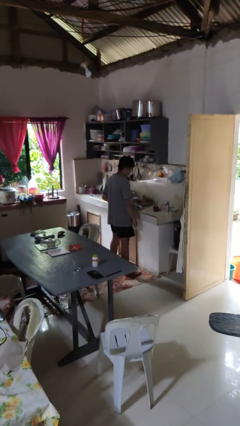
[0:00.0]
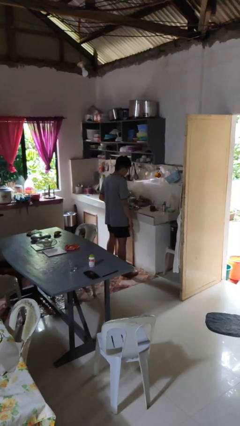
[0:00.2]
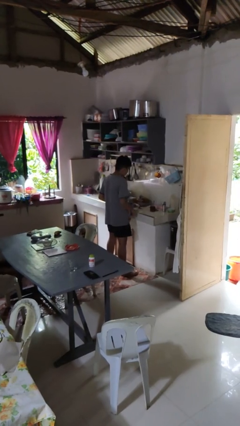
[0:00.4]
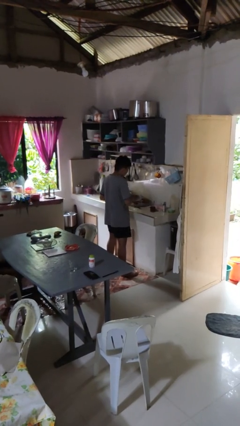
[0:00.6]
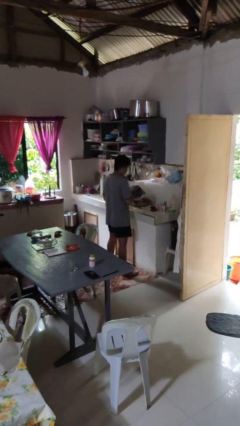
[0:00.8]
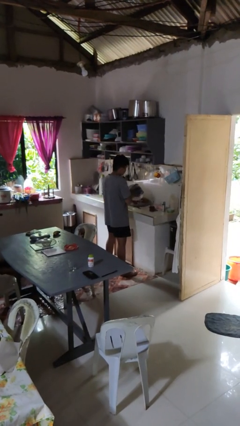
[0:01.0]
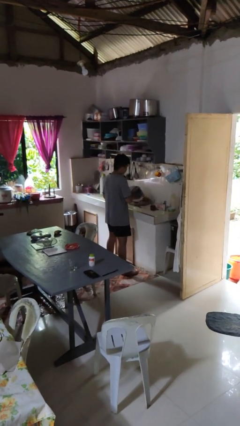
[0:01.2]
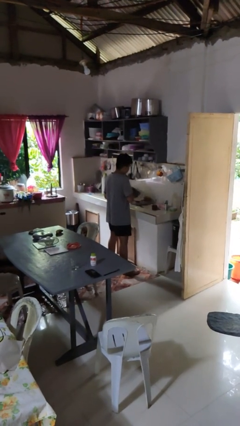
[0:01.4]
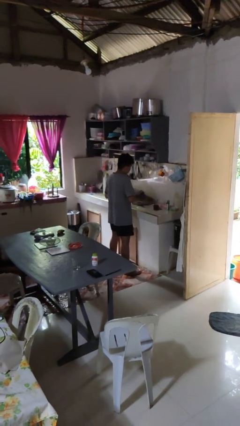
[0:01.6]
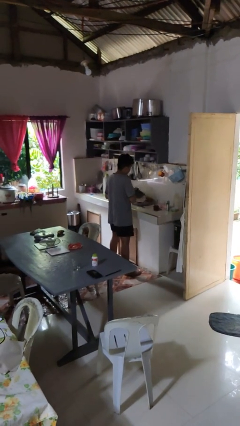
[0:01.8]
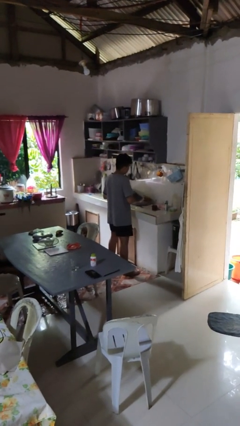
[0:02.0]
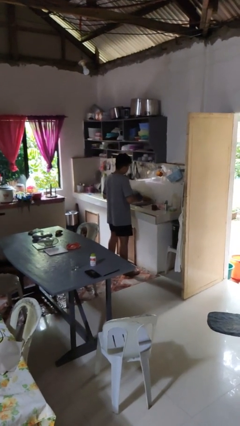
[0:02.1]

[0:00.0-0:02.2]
person dries dish

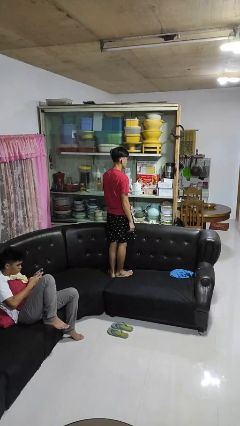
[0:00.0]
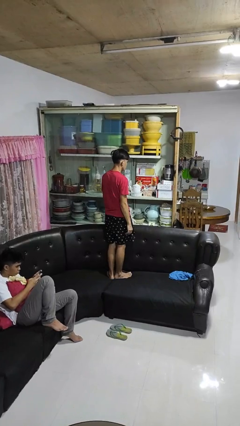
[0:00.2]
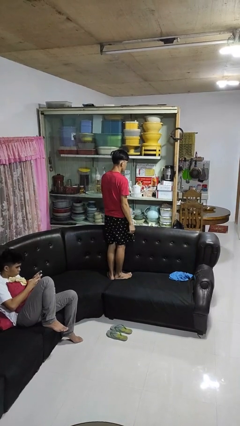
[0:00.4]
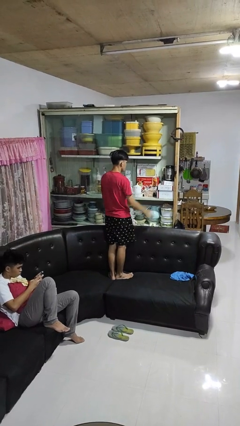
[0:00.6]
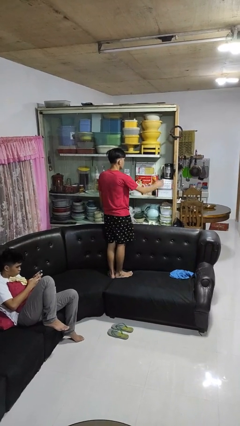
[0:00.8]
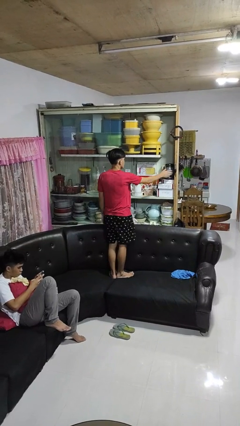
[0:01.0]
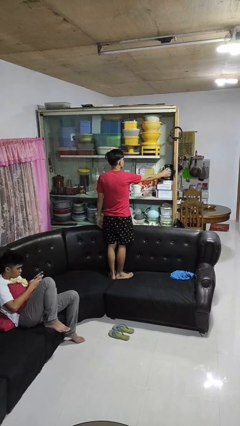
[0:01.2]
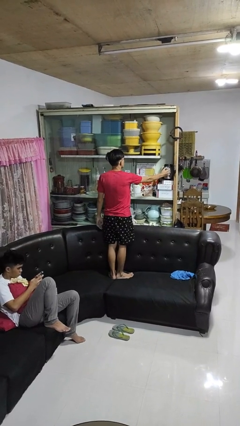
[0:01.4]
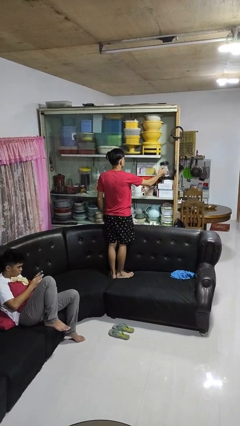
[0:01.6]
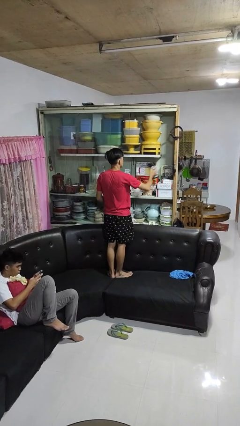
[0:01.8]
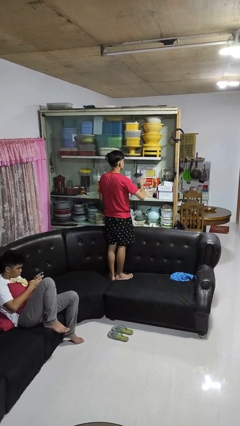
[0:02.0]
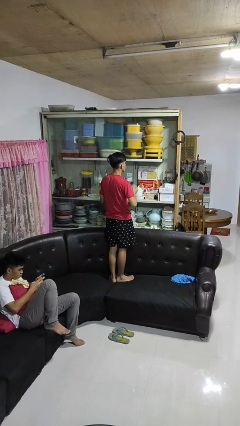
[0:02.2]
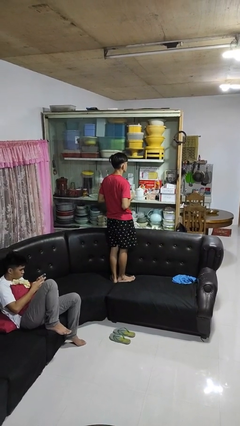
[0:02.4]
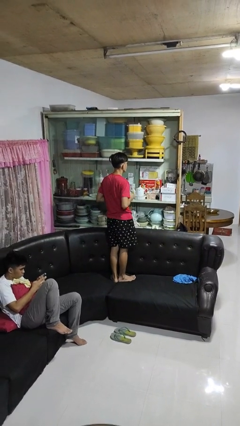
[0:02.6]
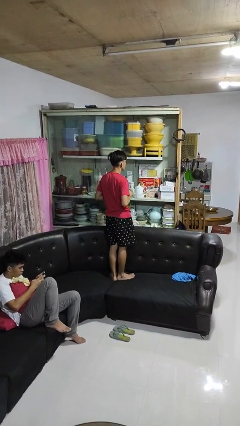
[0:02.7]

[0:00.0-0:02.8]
person picks up object from cabinet

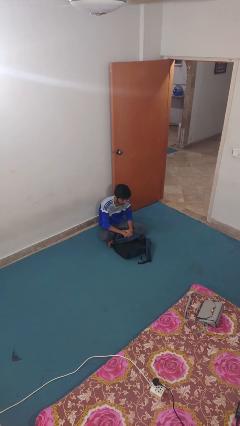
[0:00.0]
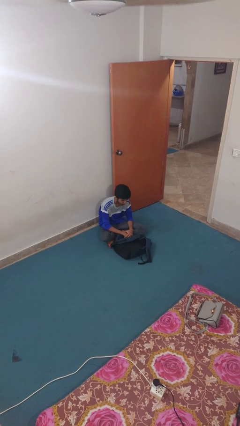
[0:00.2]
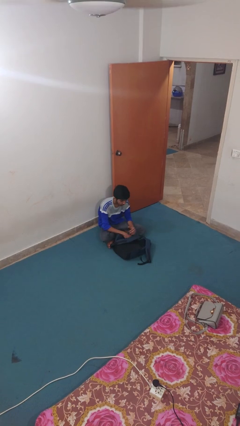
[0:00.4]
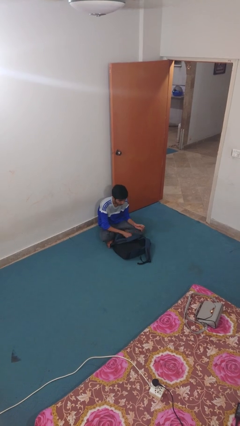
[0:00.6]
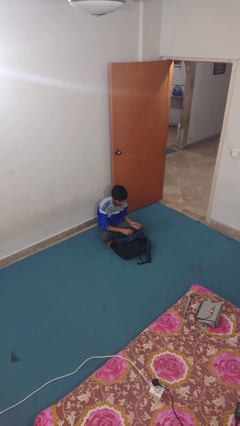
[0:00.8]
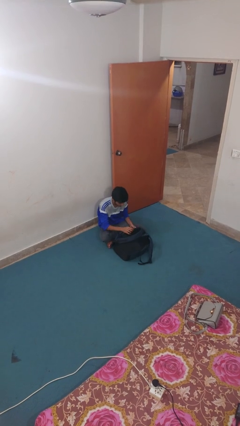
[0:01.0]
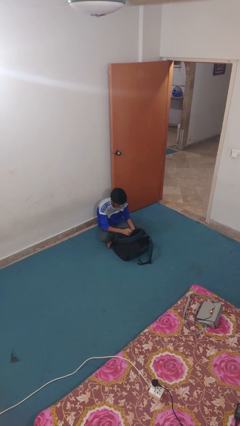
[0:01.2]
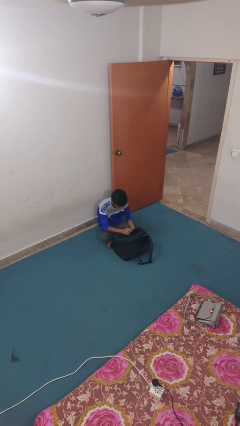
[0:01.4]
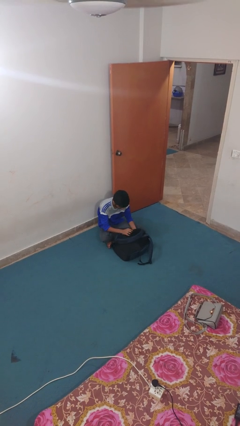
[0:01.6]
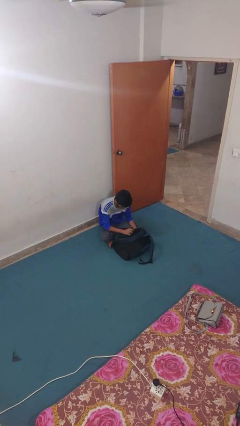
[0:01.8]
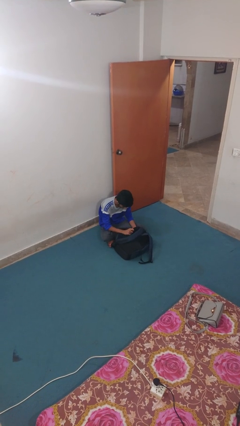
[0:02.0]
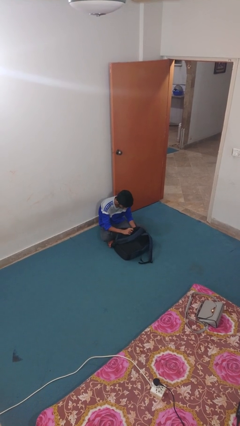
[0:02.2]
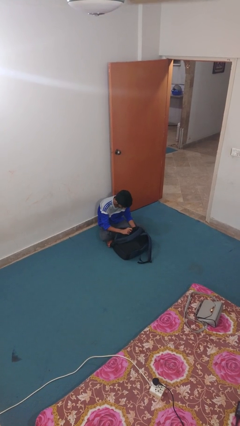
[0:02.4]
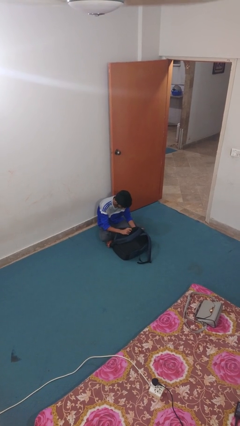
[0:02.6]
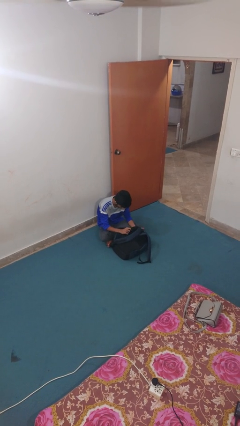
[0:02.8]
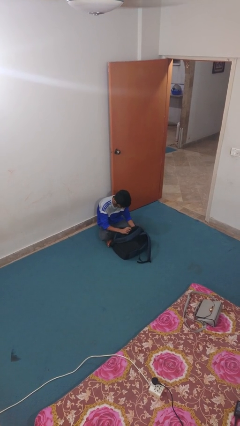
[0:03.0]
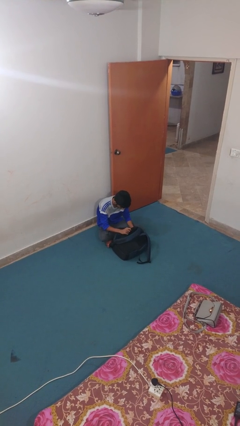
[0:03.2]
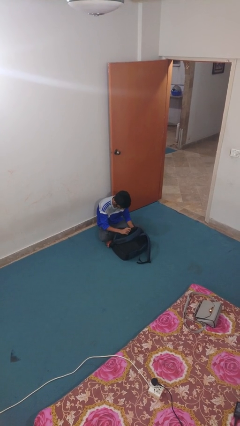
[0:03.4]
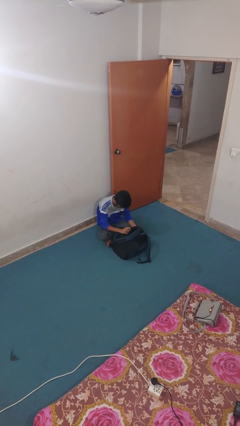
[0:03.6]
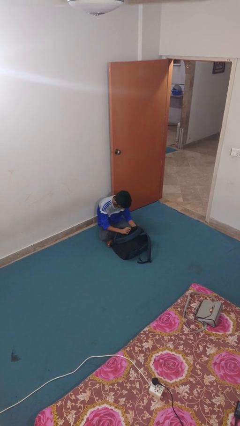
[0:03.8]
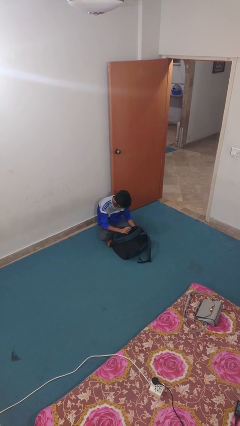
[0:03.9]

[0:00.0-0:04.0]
person searches in backpack

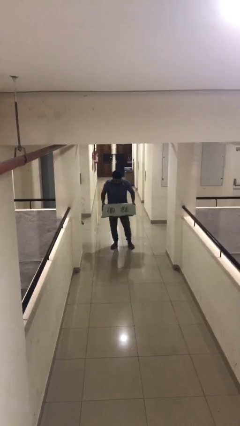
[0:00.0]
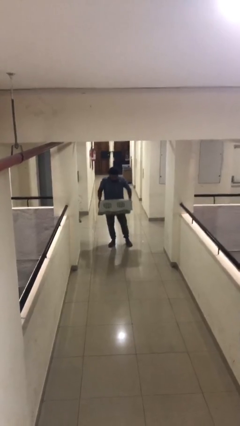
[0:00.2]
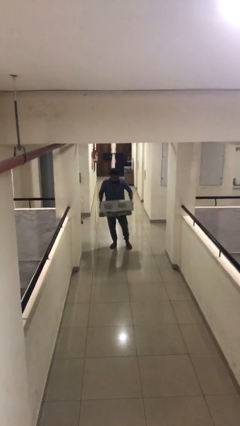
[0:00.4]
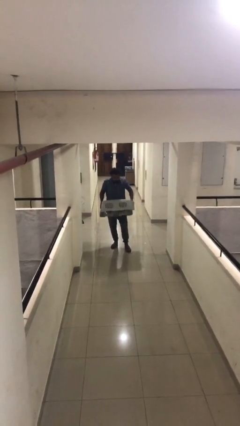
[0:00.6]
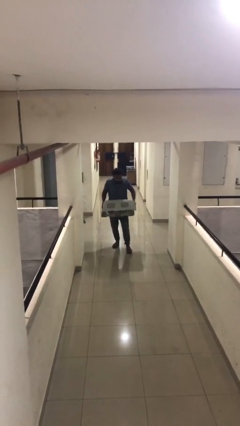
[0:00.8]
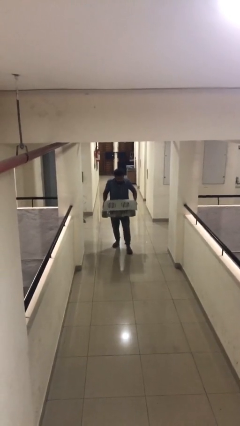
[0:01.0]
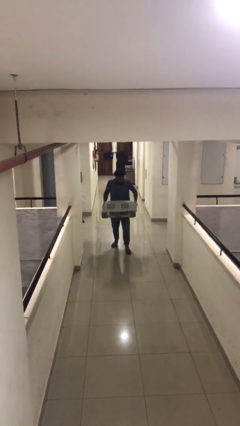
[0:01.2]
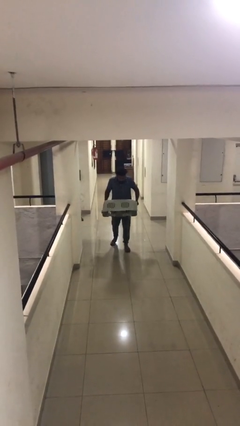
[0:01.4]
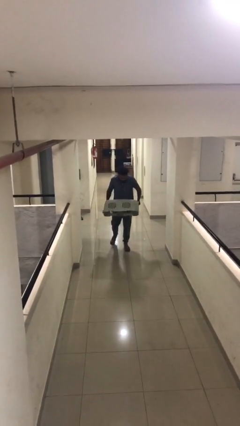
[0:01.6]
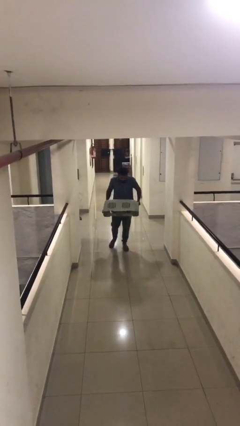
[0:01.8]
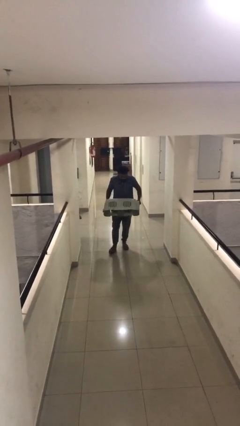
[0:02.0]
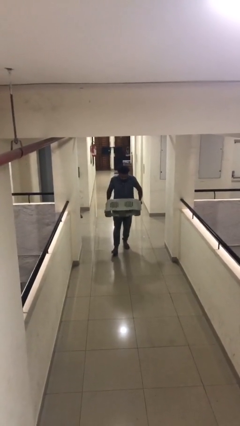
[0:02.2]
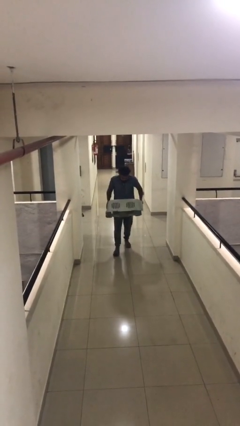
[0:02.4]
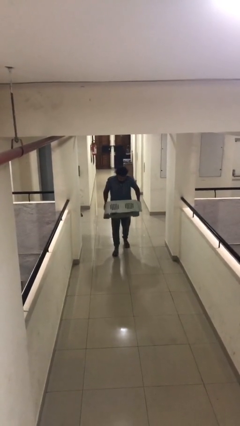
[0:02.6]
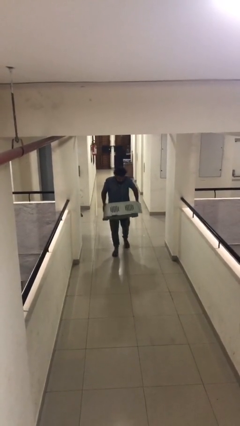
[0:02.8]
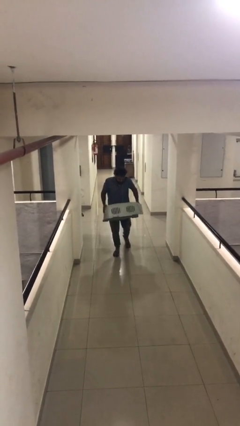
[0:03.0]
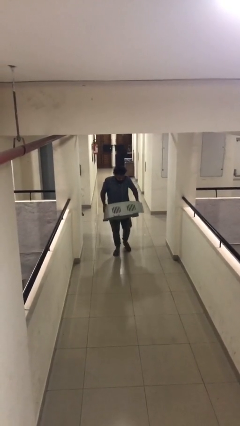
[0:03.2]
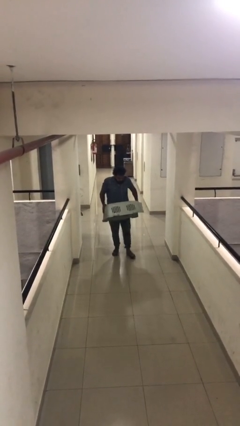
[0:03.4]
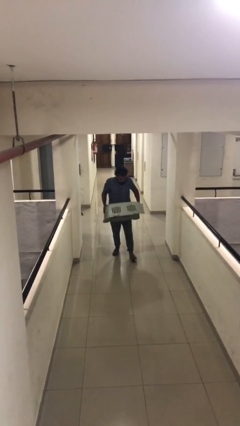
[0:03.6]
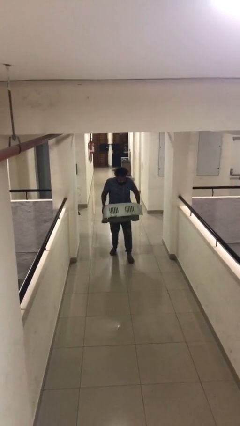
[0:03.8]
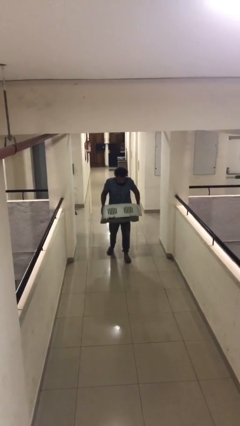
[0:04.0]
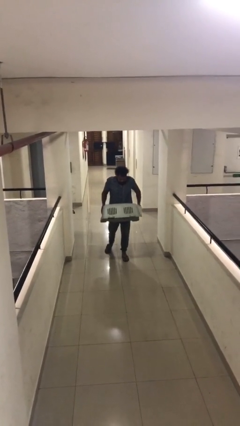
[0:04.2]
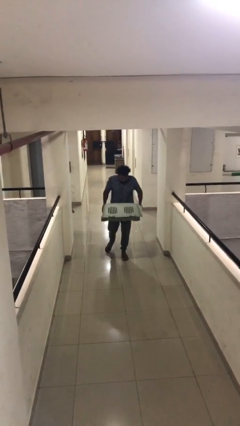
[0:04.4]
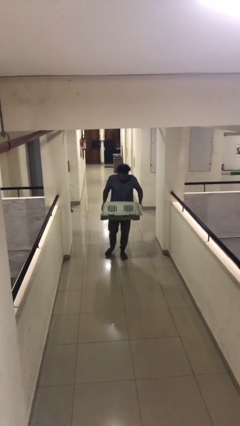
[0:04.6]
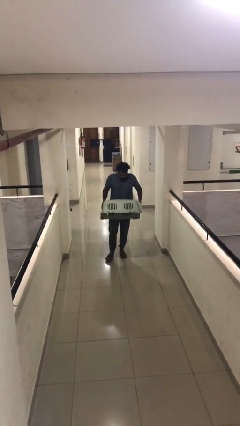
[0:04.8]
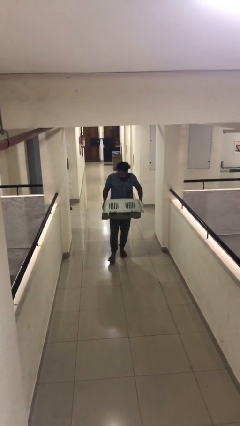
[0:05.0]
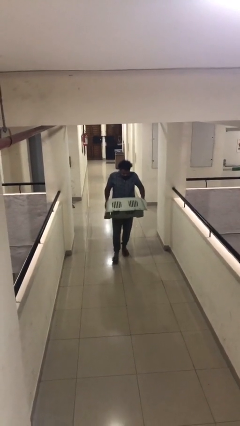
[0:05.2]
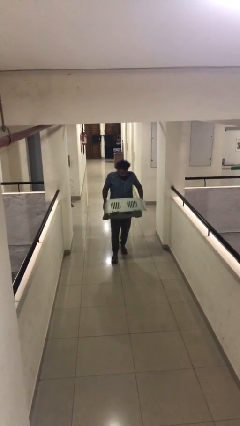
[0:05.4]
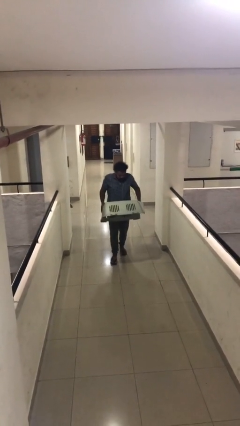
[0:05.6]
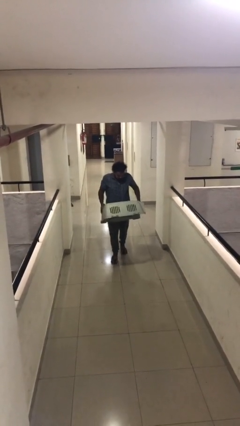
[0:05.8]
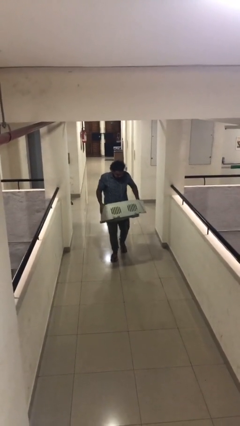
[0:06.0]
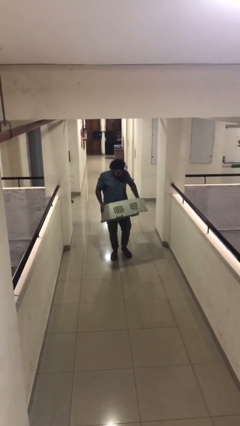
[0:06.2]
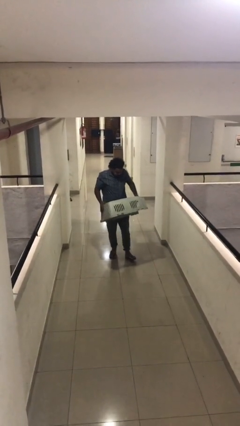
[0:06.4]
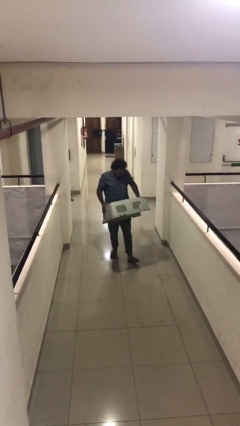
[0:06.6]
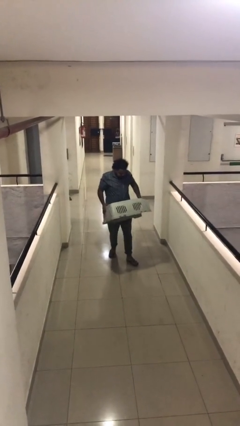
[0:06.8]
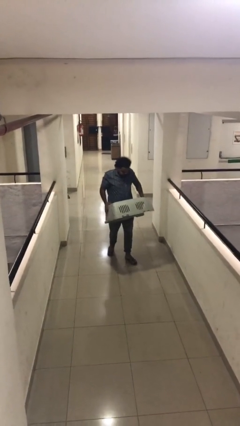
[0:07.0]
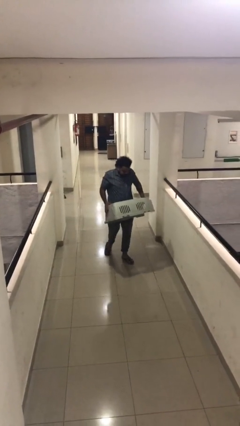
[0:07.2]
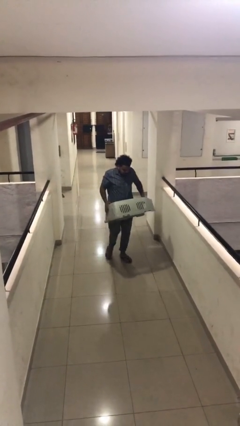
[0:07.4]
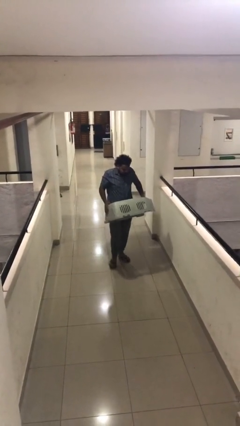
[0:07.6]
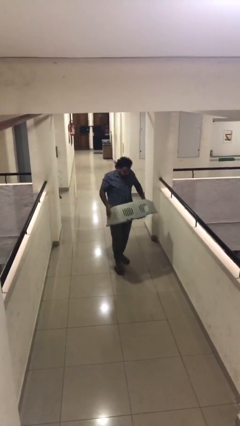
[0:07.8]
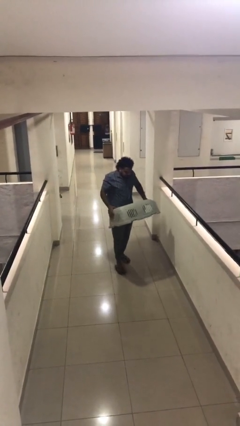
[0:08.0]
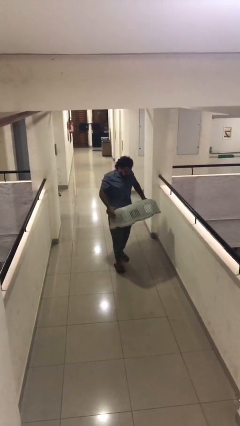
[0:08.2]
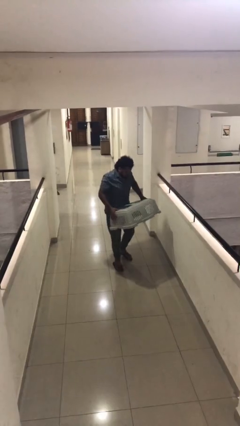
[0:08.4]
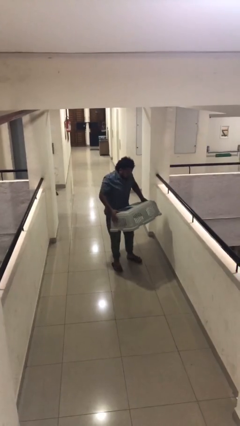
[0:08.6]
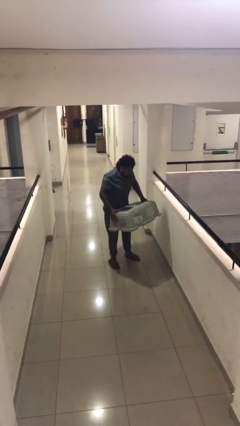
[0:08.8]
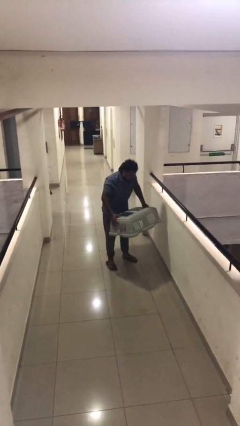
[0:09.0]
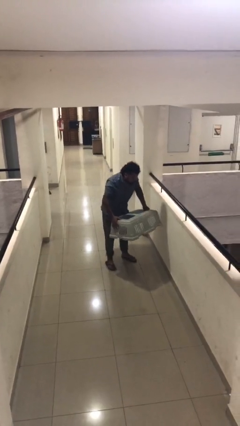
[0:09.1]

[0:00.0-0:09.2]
person carries heavy object
